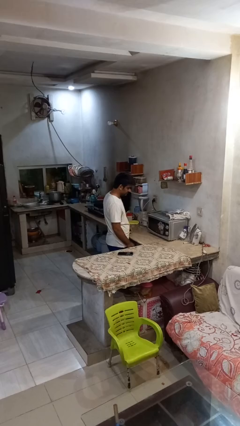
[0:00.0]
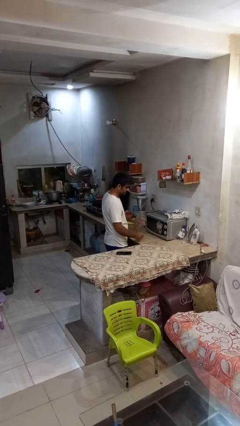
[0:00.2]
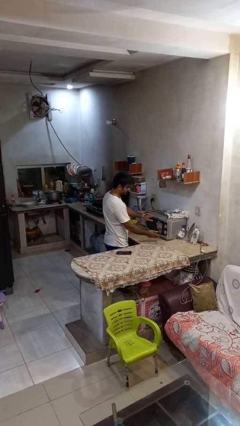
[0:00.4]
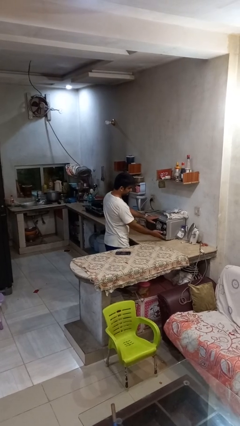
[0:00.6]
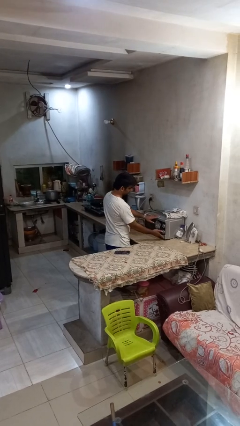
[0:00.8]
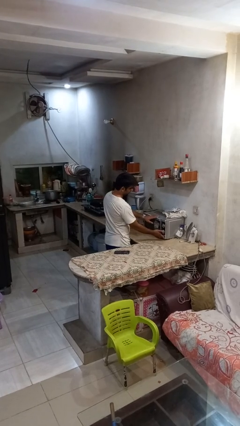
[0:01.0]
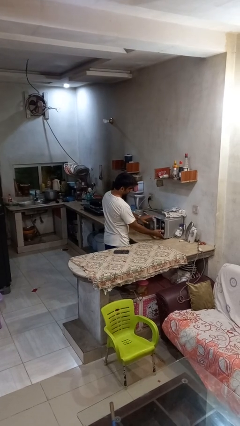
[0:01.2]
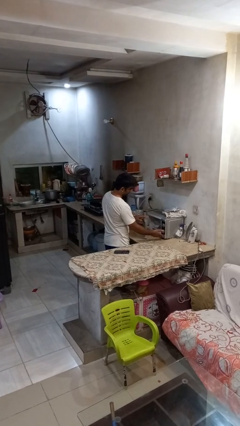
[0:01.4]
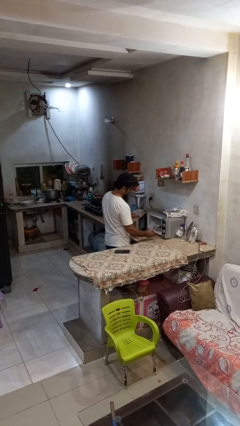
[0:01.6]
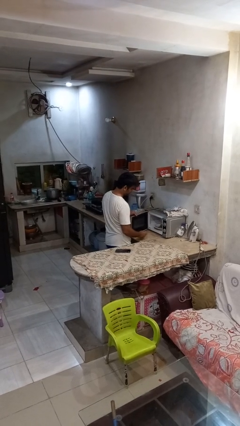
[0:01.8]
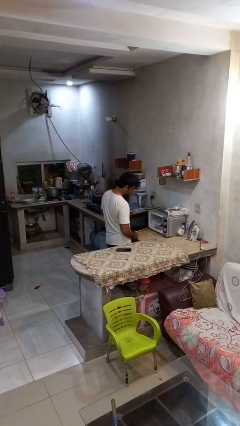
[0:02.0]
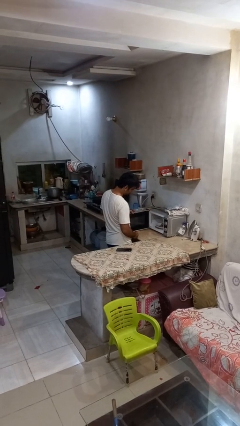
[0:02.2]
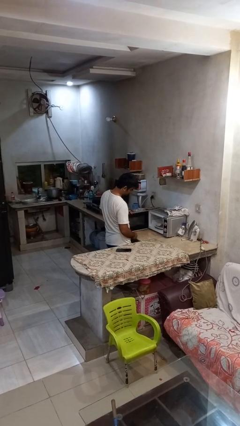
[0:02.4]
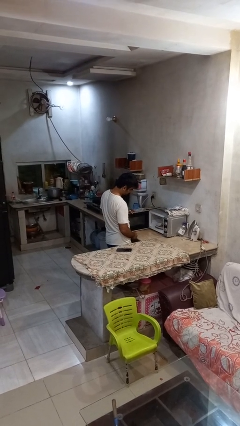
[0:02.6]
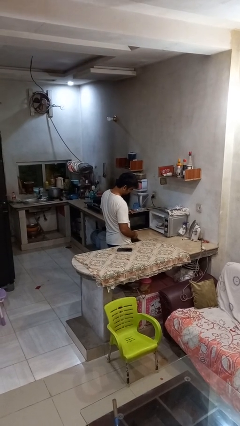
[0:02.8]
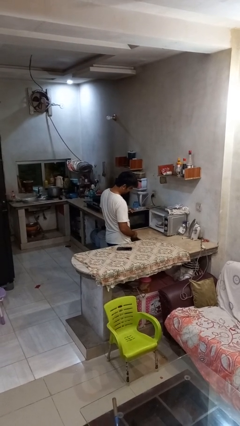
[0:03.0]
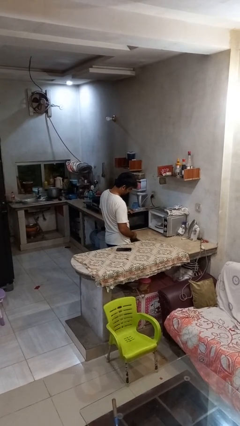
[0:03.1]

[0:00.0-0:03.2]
person opens microwave

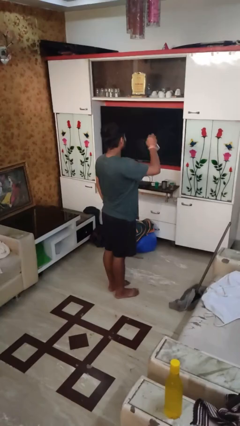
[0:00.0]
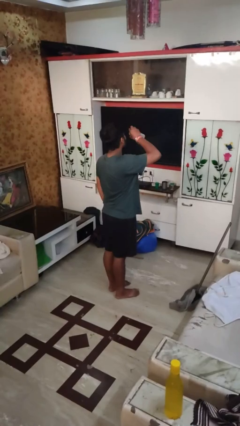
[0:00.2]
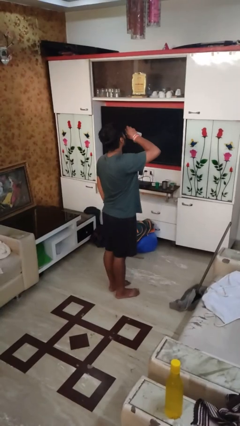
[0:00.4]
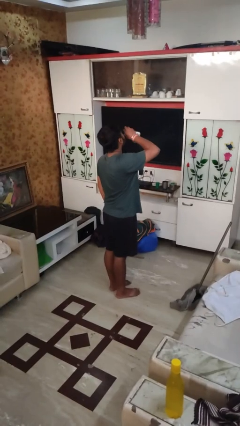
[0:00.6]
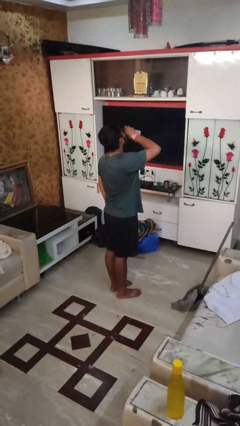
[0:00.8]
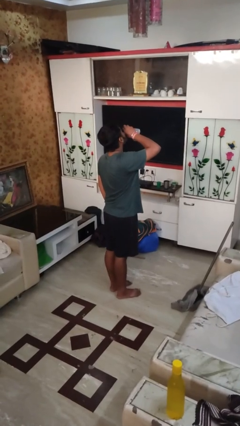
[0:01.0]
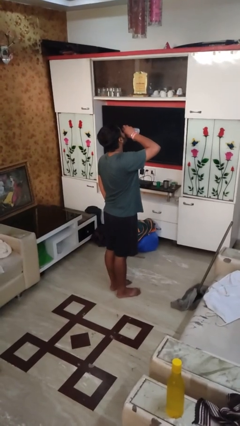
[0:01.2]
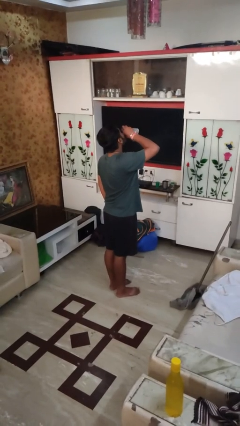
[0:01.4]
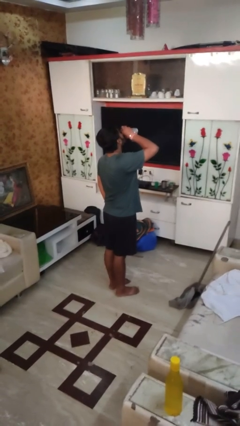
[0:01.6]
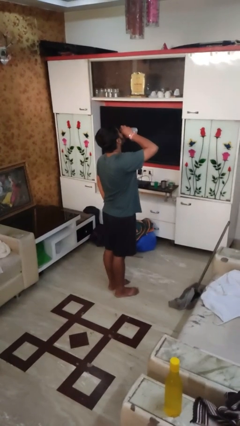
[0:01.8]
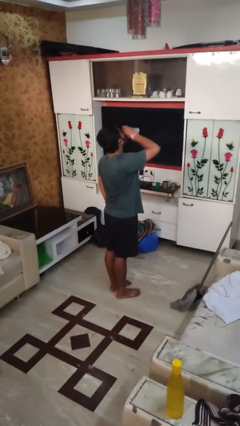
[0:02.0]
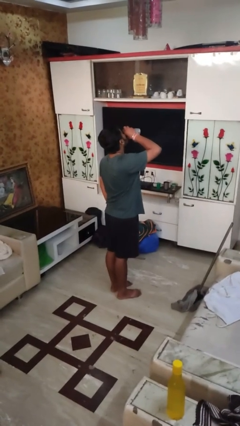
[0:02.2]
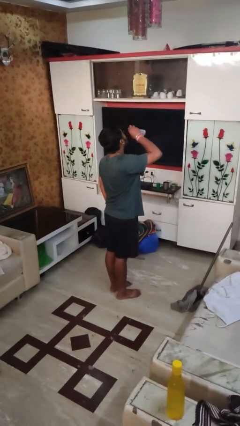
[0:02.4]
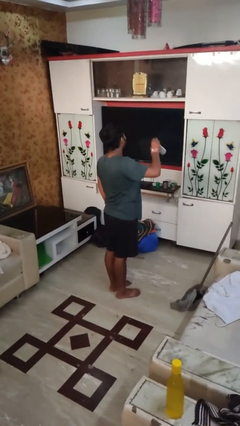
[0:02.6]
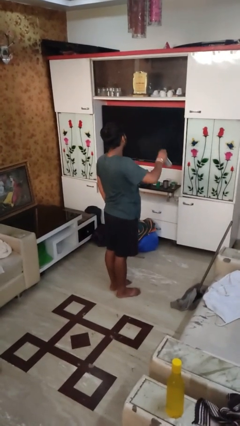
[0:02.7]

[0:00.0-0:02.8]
person drinks from beverage can

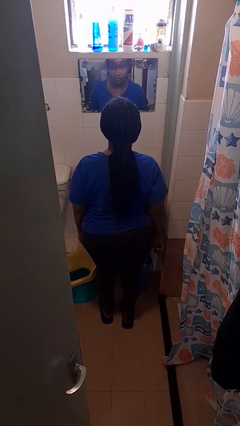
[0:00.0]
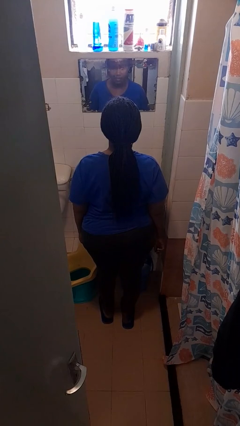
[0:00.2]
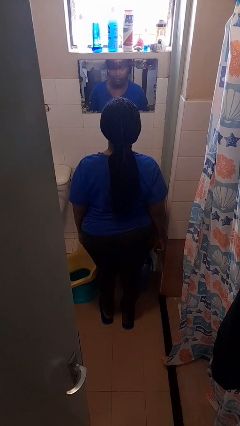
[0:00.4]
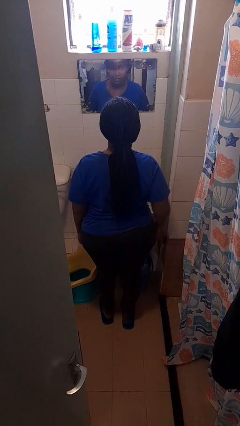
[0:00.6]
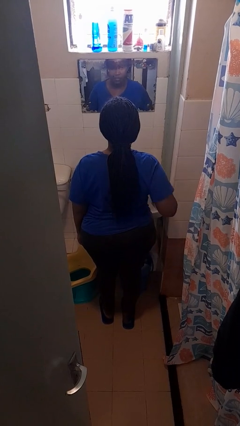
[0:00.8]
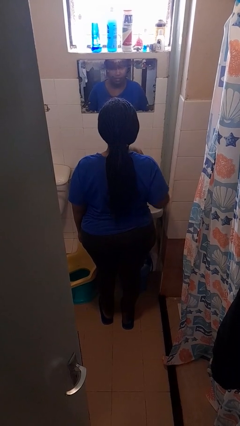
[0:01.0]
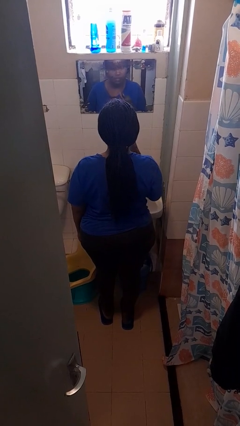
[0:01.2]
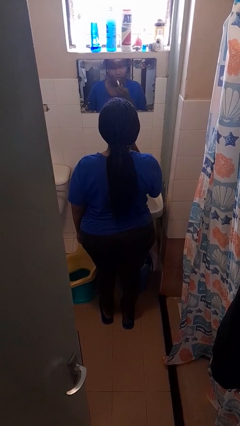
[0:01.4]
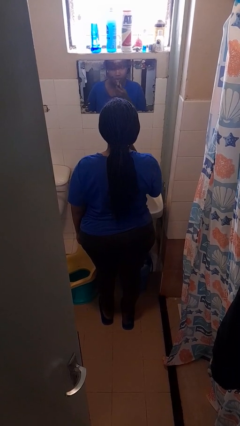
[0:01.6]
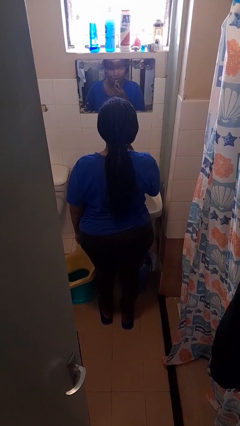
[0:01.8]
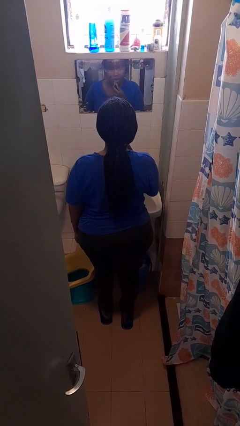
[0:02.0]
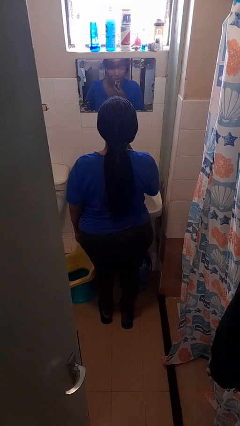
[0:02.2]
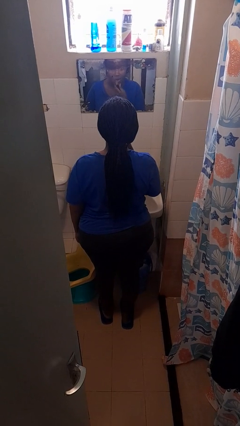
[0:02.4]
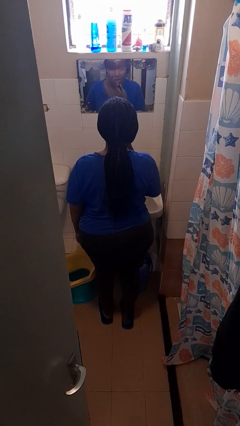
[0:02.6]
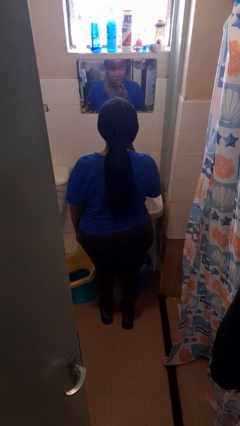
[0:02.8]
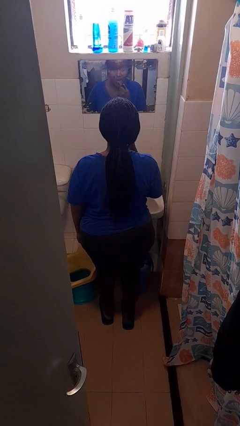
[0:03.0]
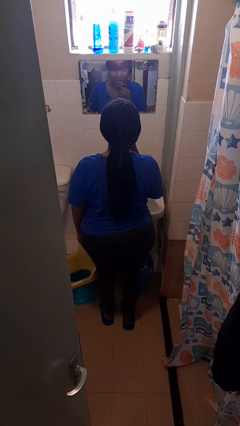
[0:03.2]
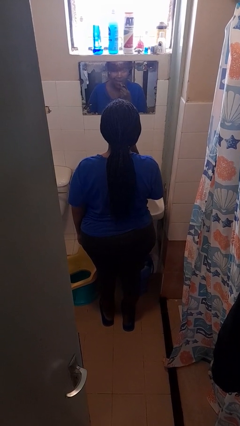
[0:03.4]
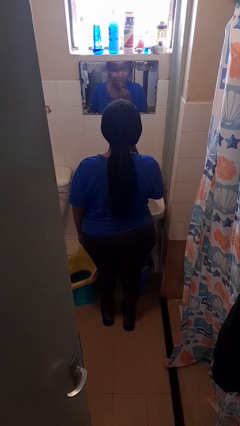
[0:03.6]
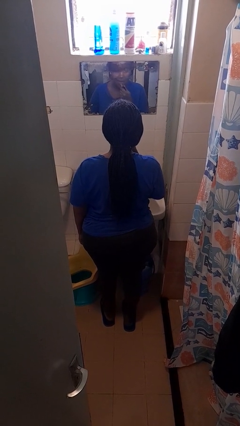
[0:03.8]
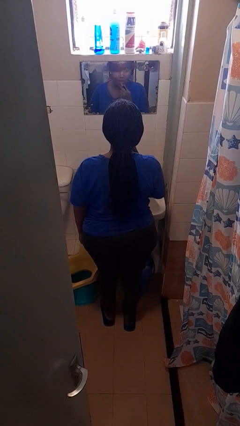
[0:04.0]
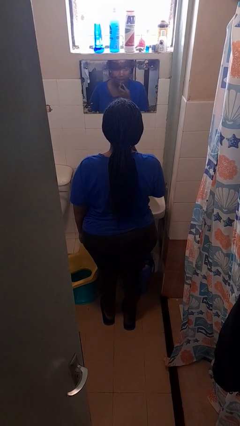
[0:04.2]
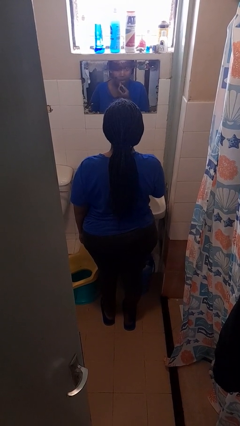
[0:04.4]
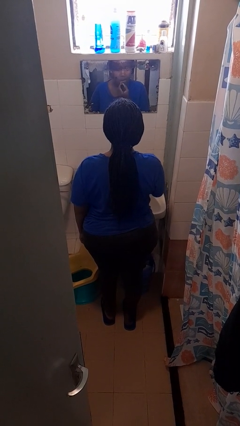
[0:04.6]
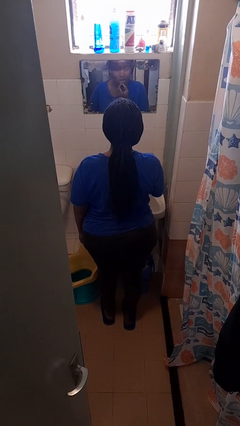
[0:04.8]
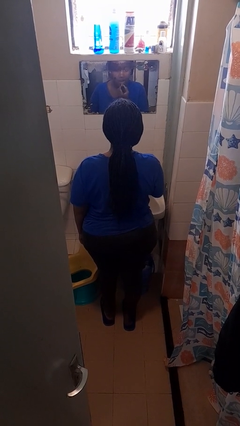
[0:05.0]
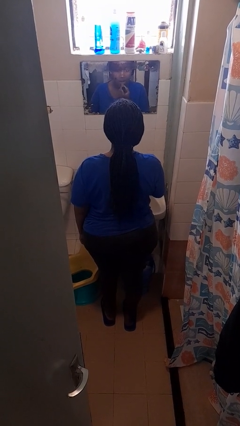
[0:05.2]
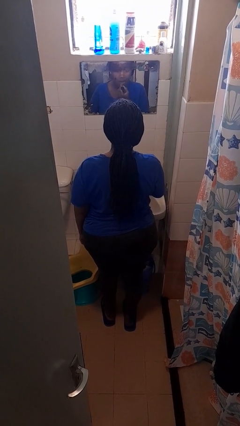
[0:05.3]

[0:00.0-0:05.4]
person applies lip makeup

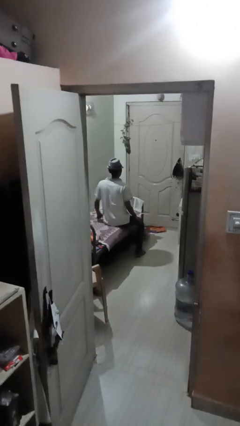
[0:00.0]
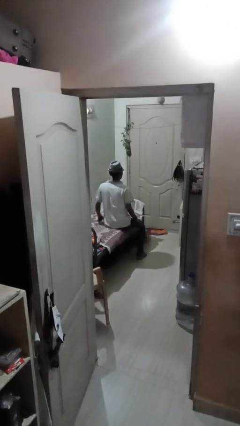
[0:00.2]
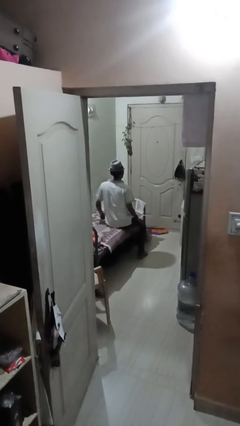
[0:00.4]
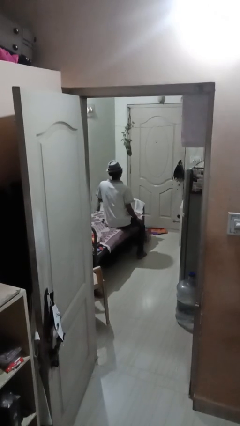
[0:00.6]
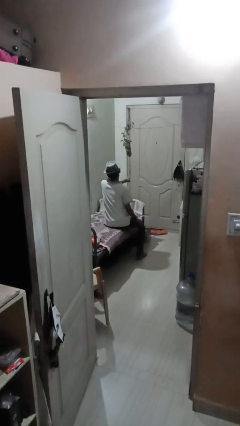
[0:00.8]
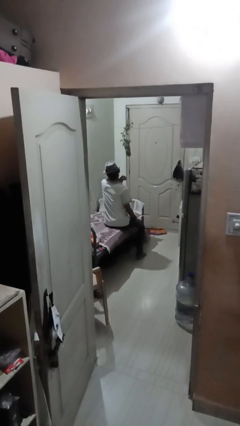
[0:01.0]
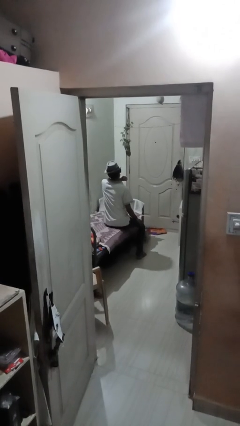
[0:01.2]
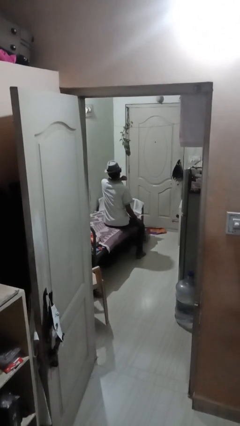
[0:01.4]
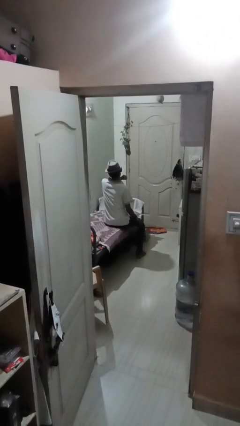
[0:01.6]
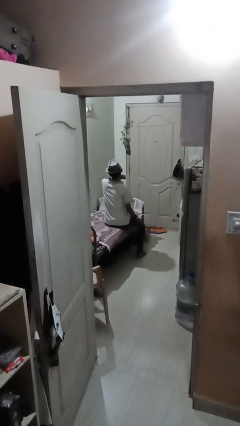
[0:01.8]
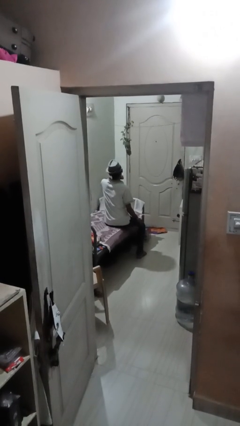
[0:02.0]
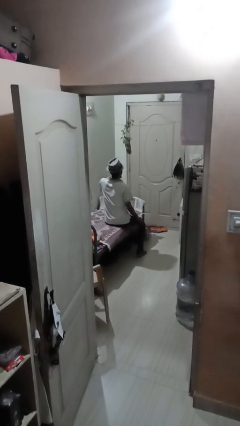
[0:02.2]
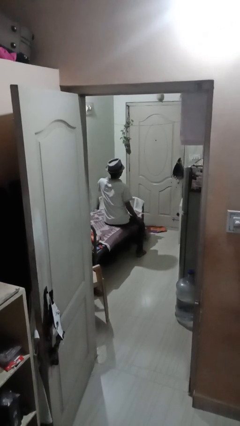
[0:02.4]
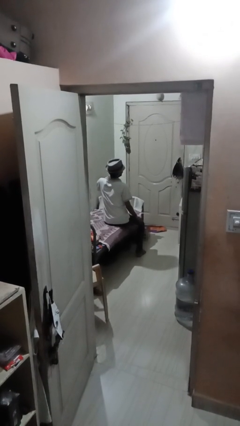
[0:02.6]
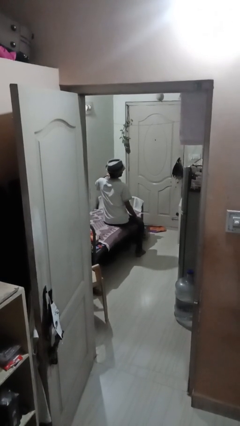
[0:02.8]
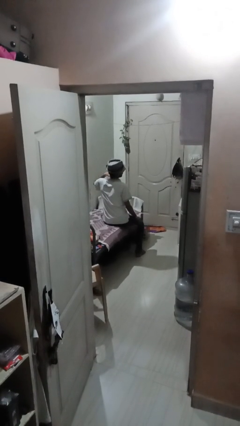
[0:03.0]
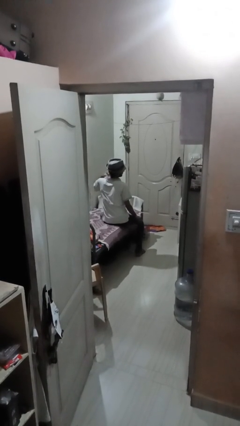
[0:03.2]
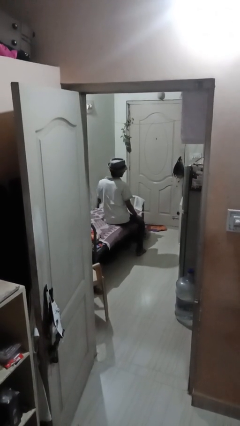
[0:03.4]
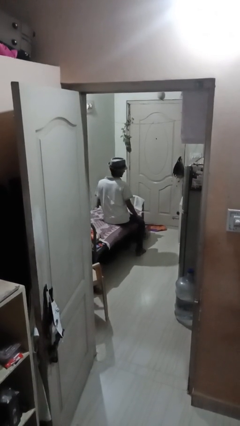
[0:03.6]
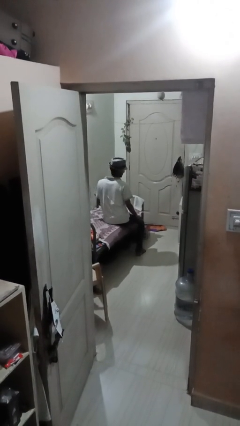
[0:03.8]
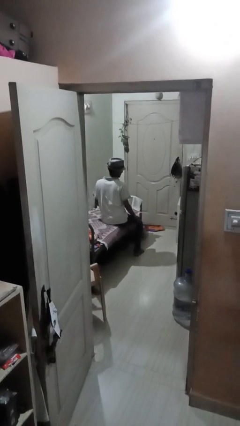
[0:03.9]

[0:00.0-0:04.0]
person gestures cut

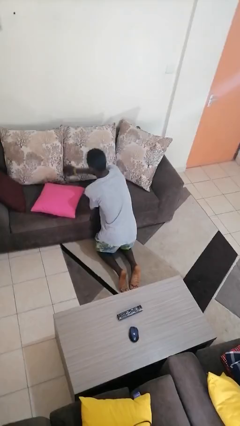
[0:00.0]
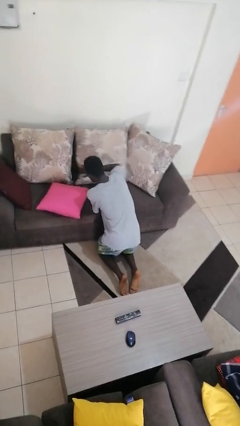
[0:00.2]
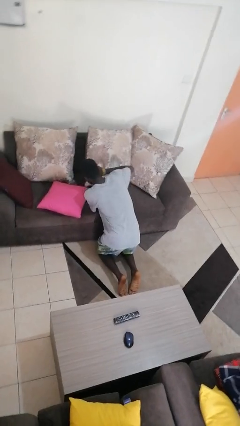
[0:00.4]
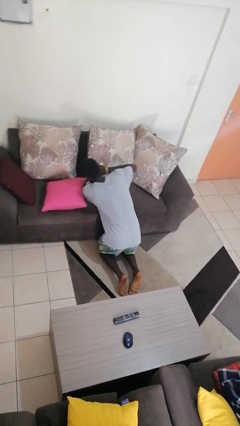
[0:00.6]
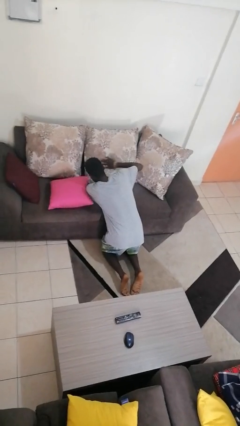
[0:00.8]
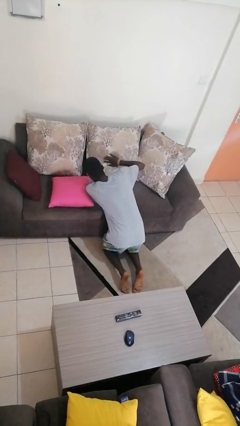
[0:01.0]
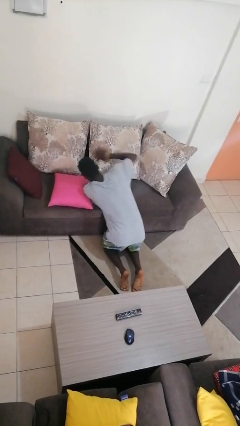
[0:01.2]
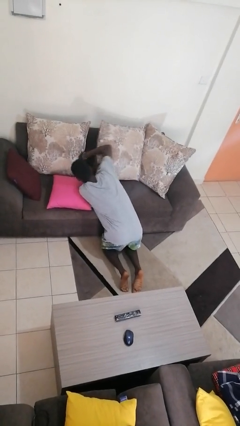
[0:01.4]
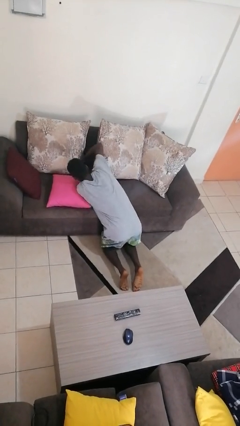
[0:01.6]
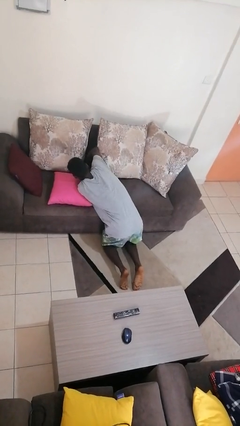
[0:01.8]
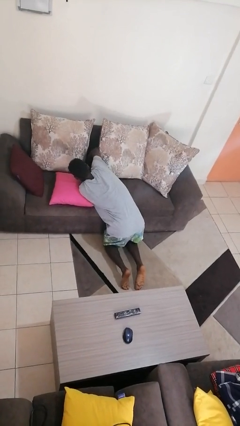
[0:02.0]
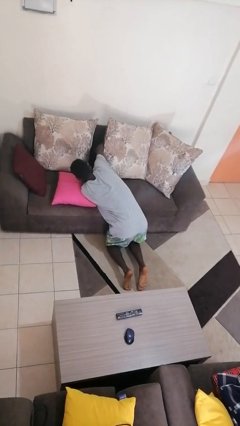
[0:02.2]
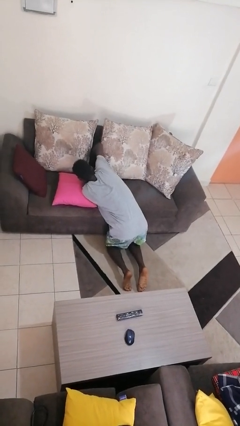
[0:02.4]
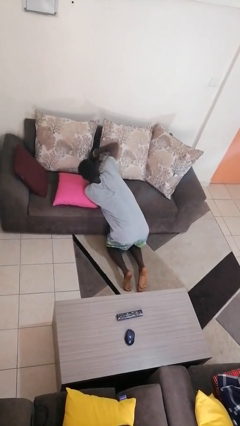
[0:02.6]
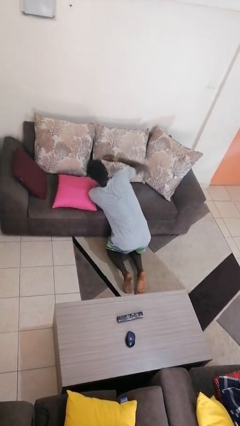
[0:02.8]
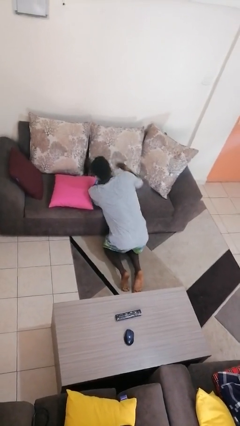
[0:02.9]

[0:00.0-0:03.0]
person searches in couch
